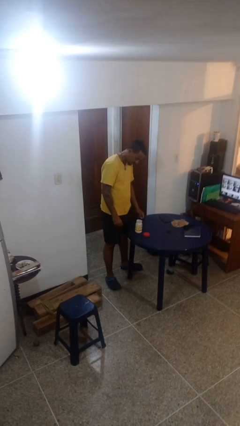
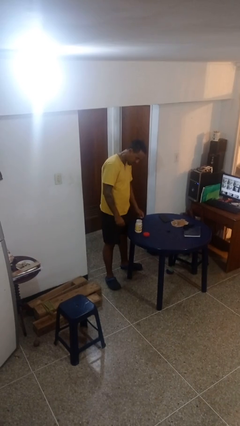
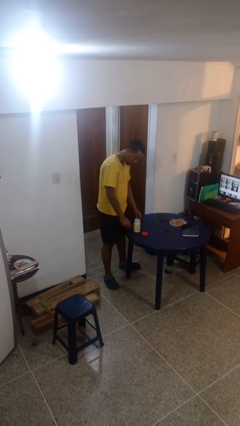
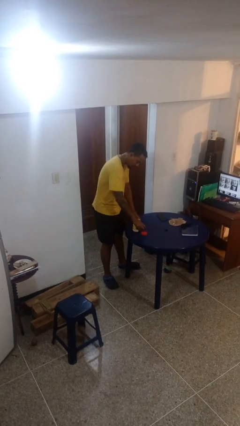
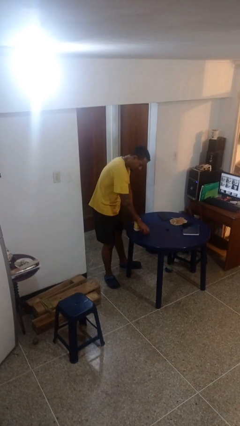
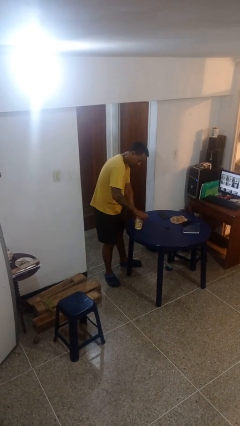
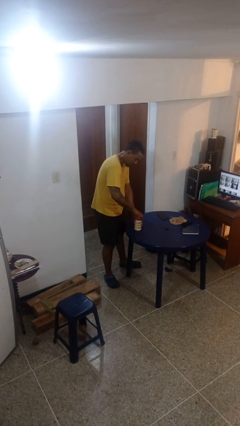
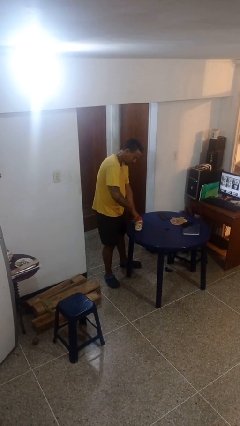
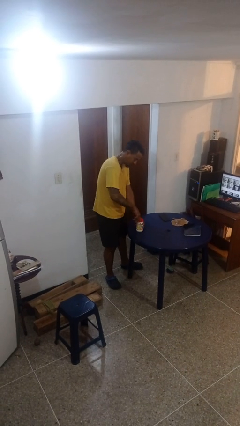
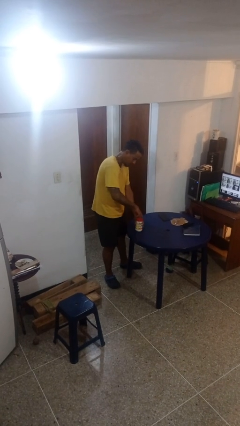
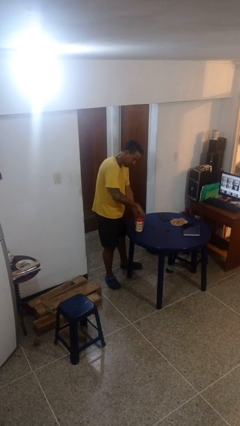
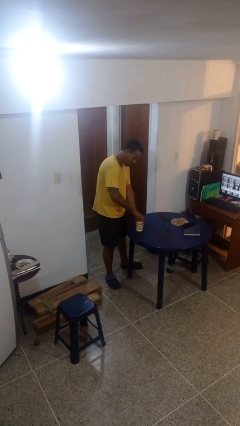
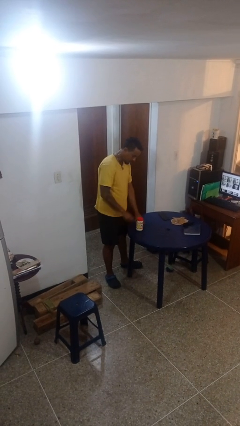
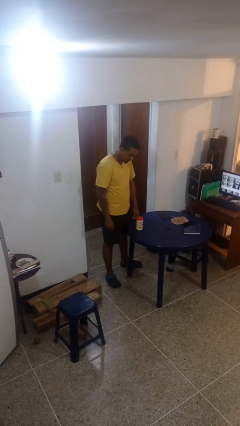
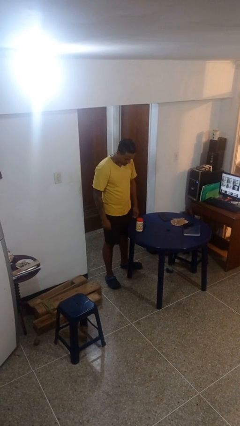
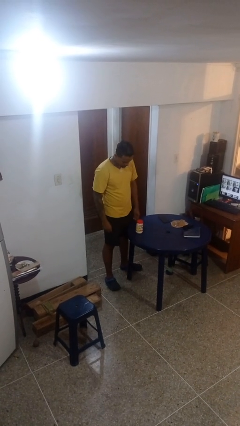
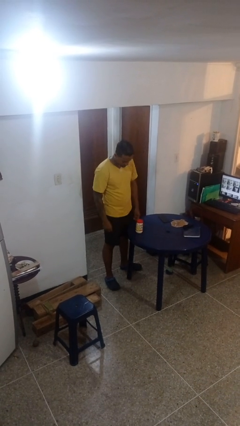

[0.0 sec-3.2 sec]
person closes jar

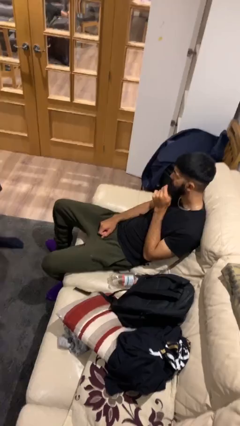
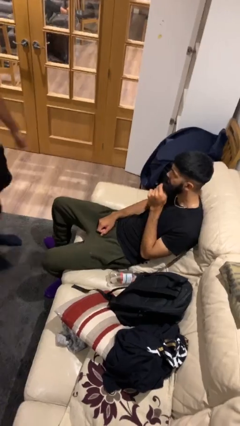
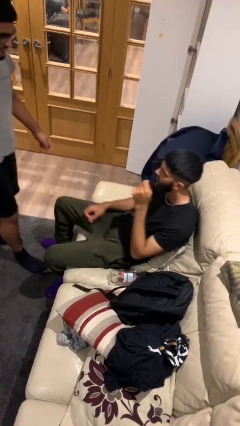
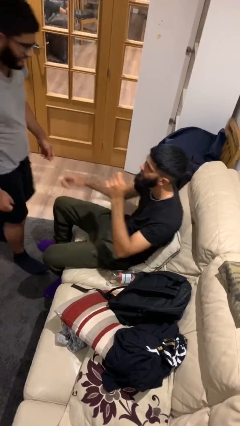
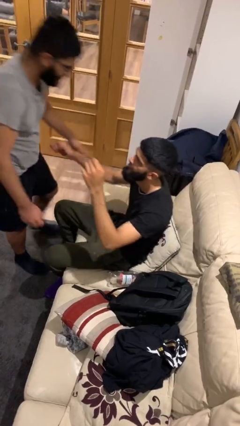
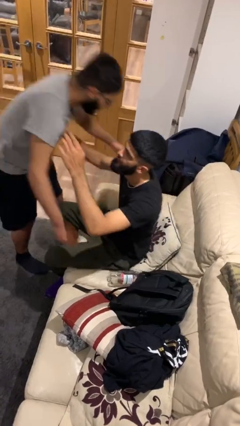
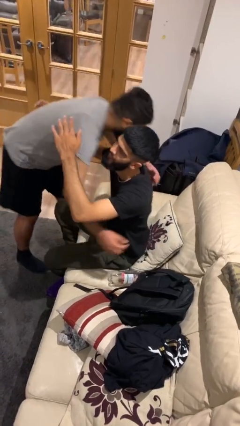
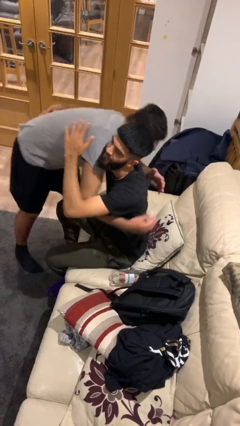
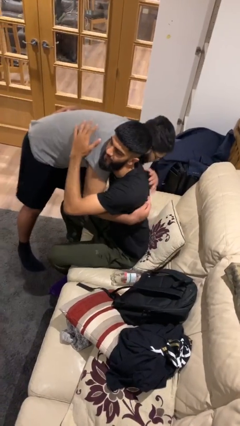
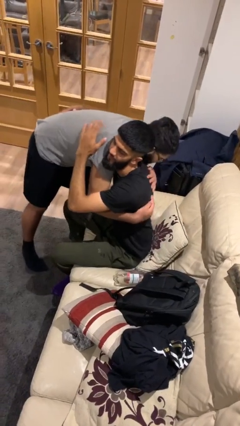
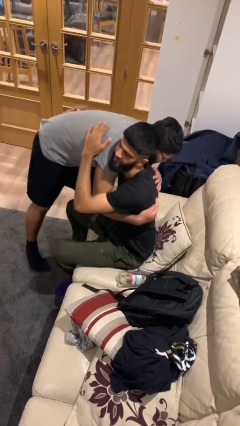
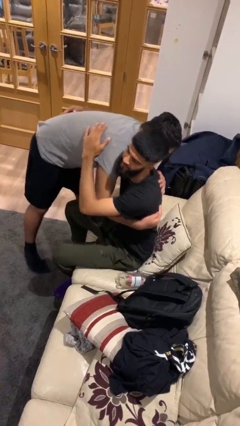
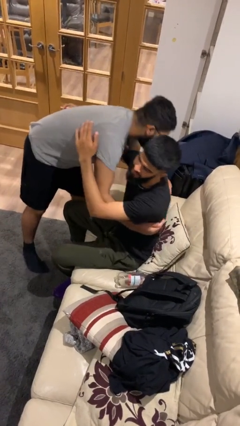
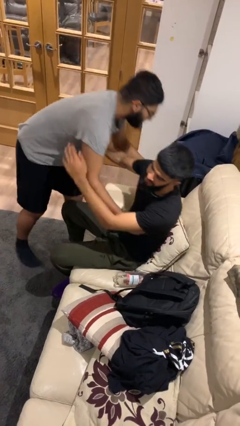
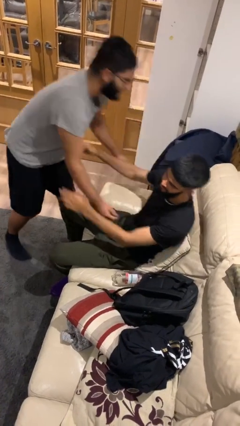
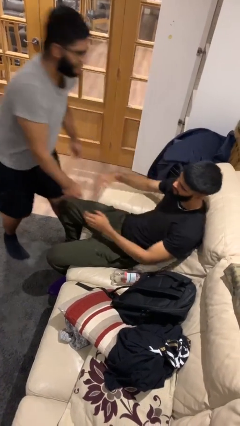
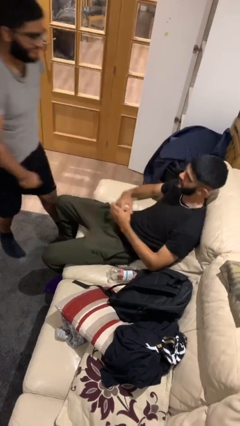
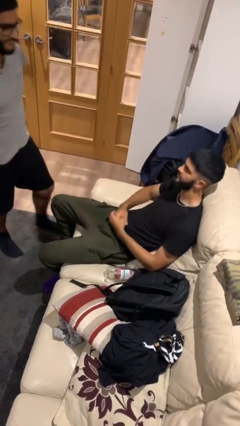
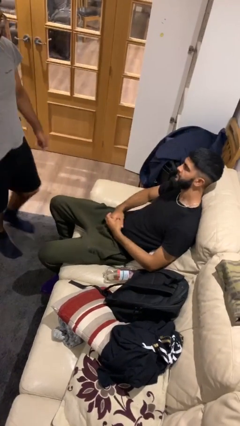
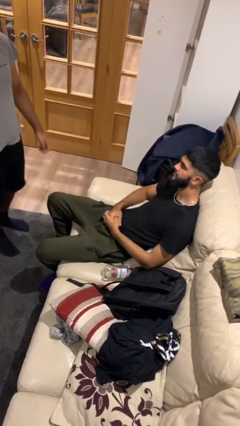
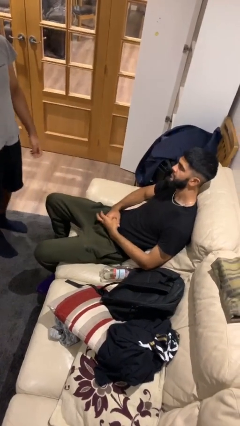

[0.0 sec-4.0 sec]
person embraces person

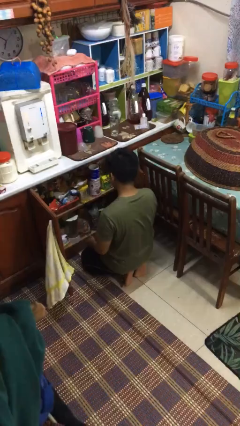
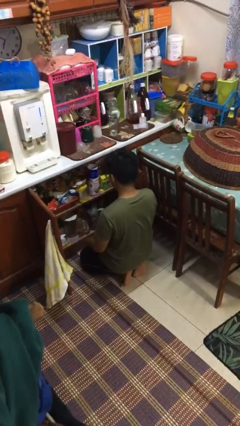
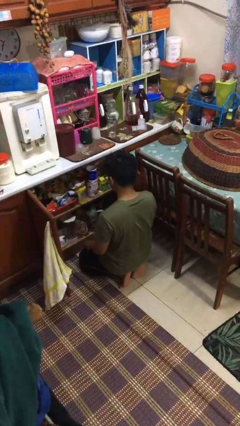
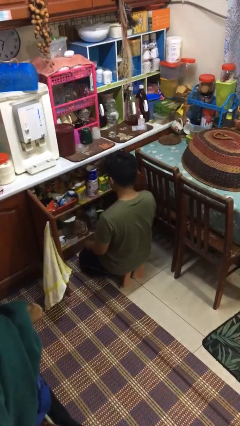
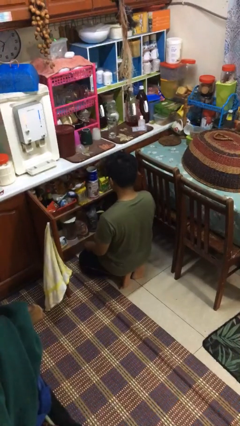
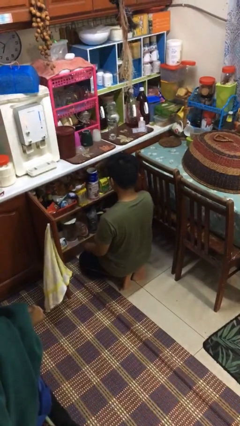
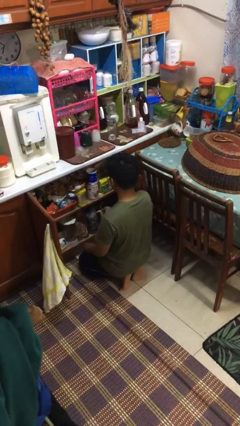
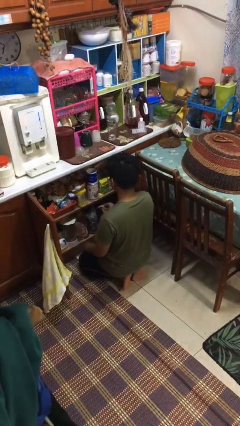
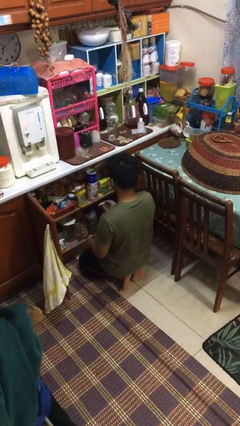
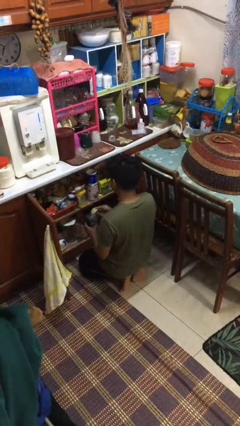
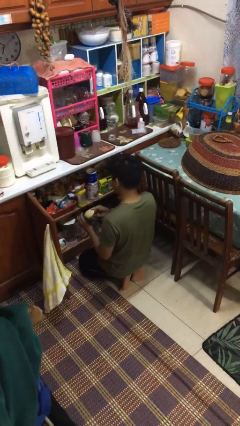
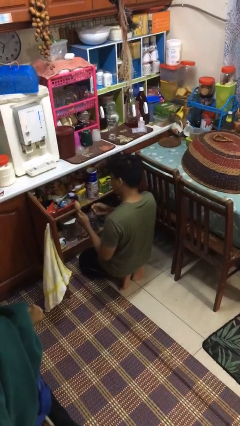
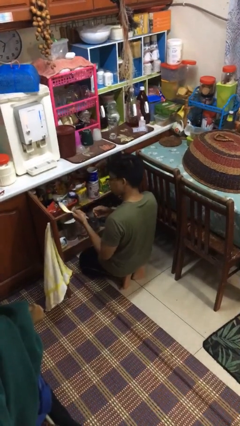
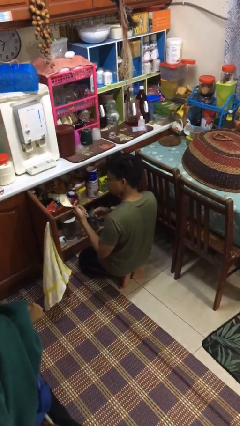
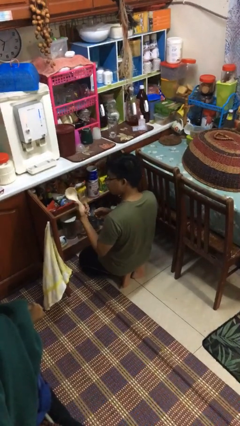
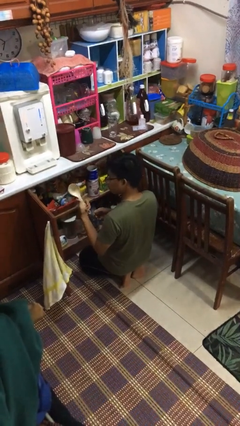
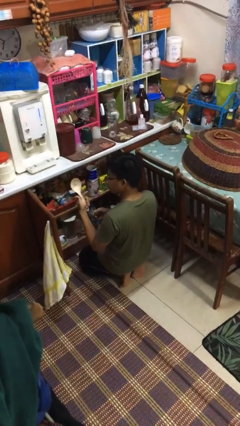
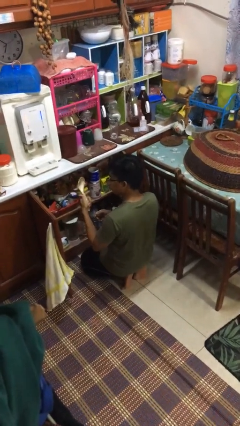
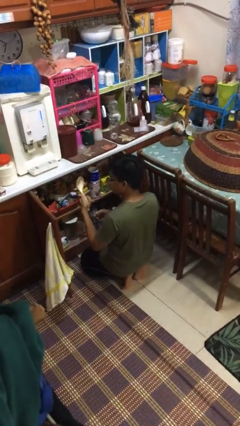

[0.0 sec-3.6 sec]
person takes object from cabinet

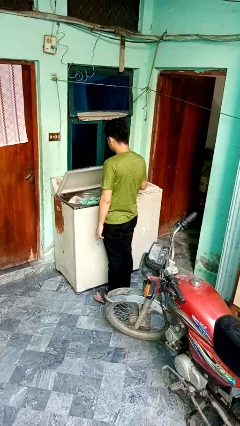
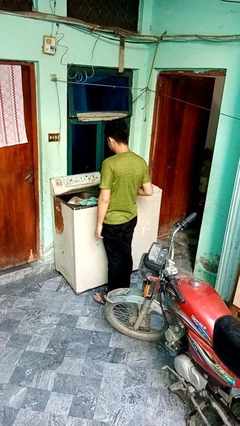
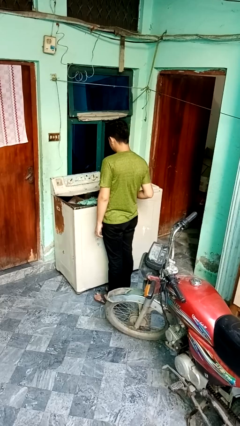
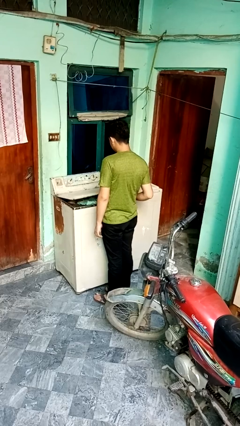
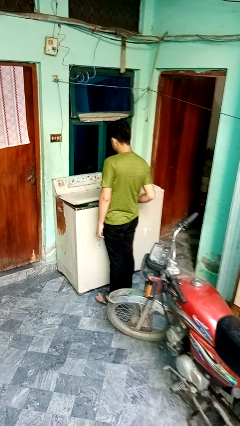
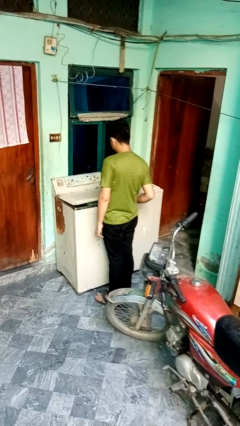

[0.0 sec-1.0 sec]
person closes clothes washer

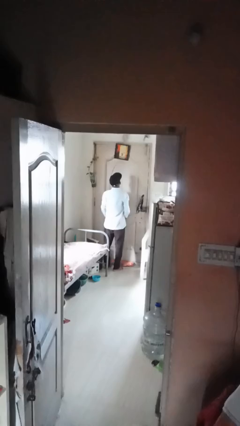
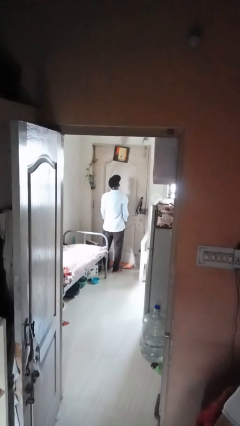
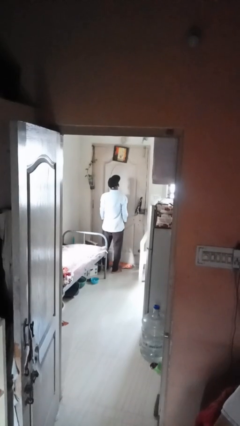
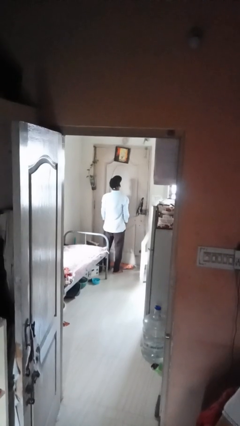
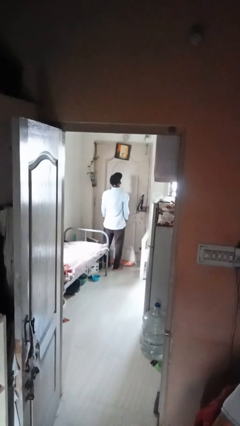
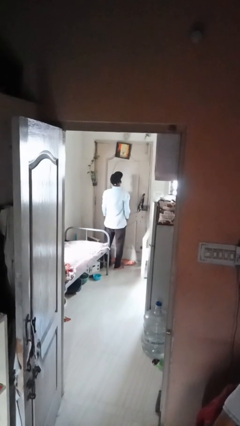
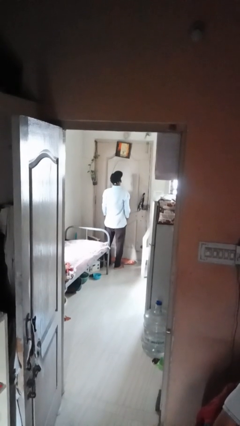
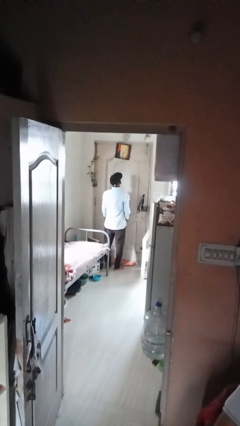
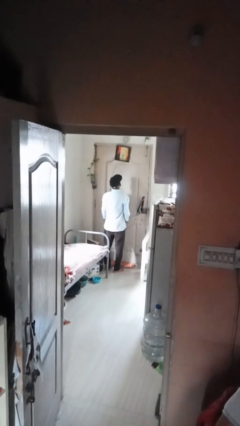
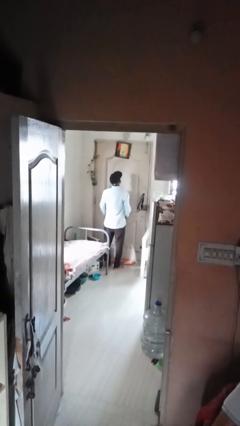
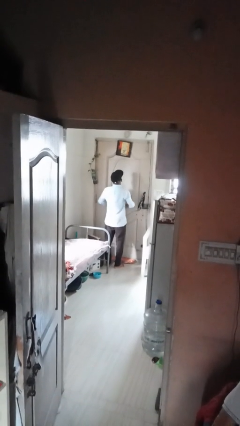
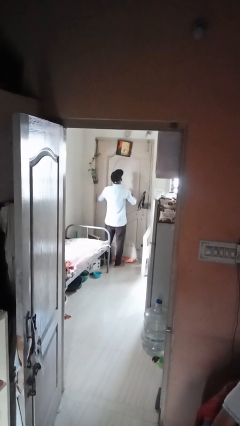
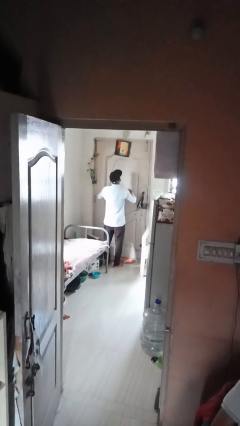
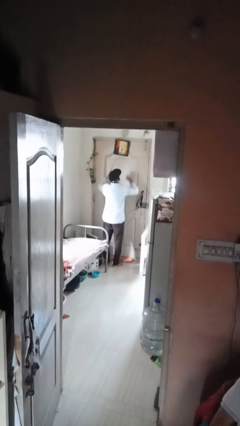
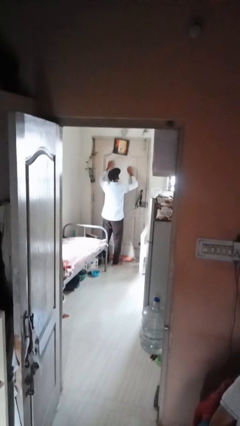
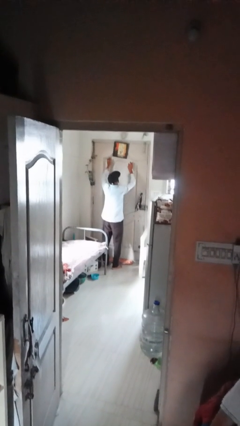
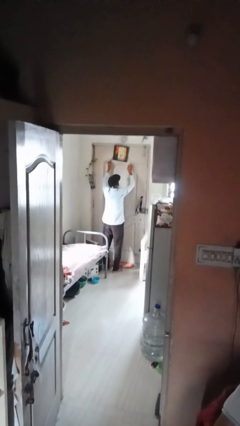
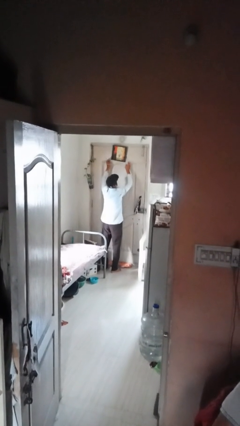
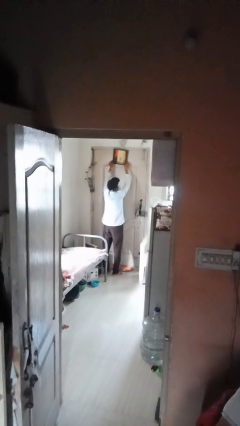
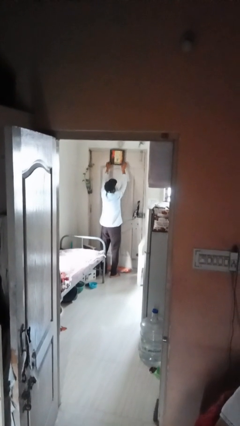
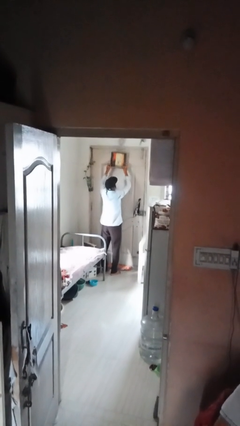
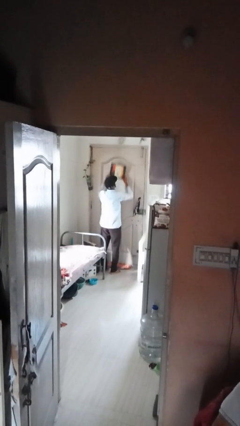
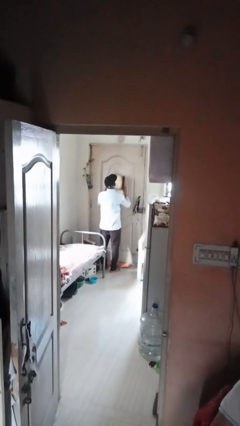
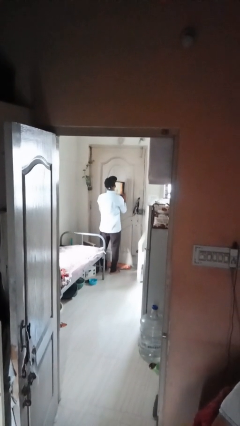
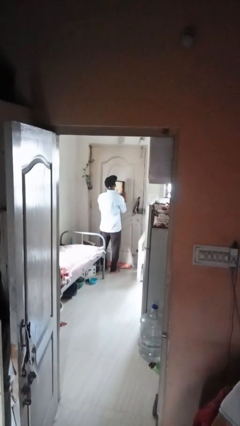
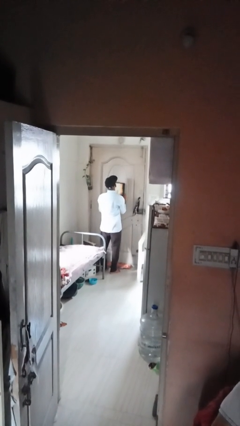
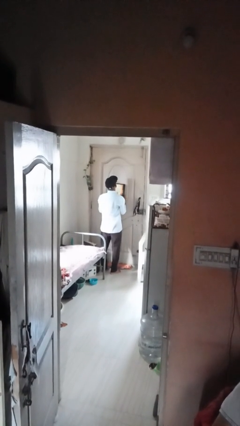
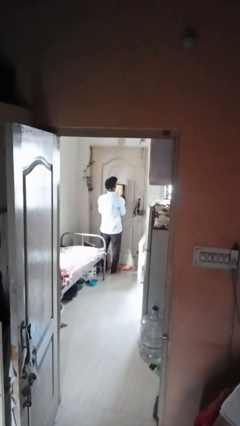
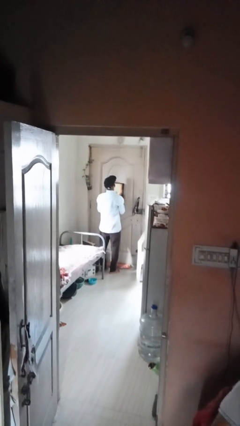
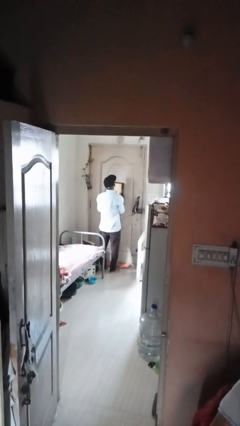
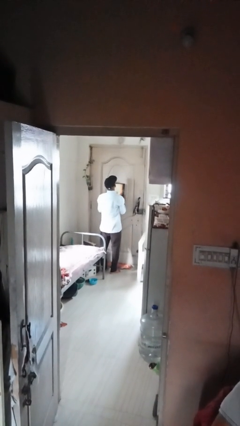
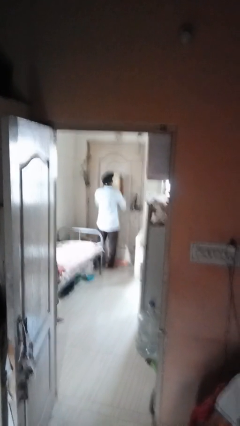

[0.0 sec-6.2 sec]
person takes down picture frame
